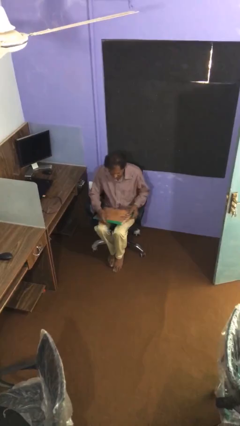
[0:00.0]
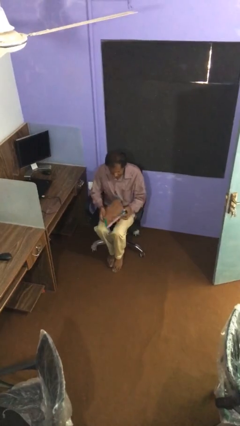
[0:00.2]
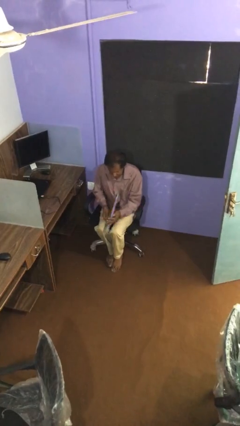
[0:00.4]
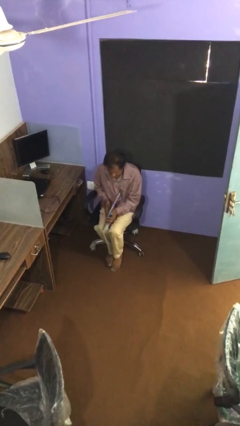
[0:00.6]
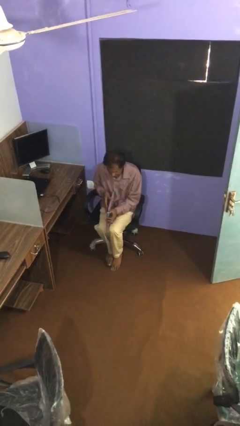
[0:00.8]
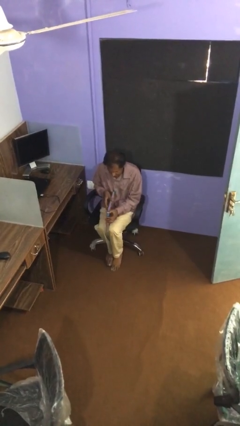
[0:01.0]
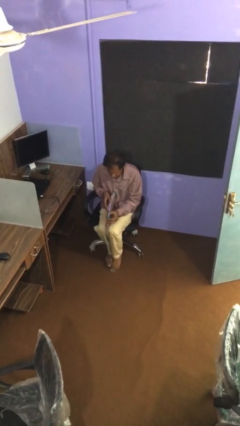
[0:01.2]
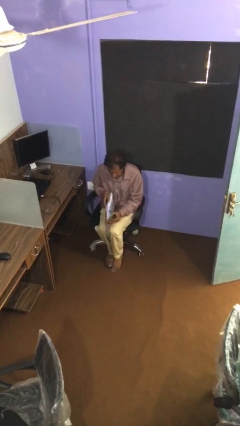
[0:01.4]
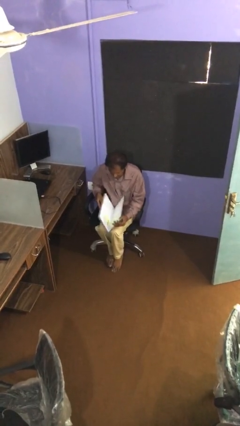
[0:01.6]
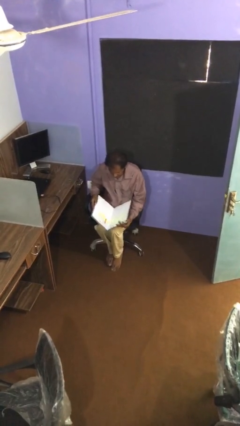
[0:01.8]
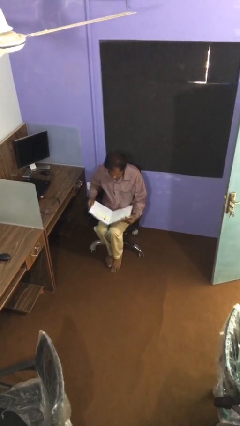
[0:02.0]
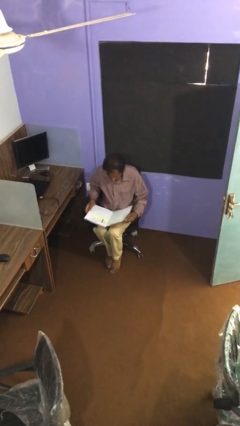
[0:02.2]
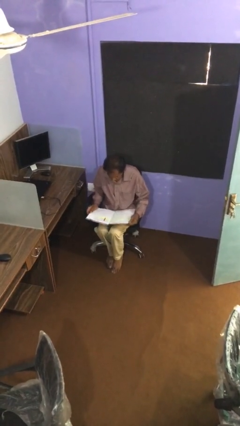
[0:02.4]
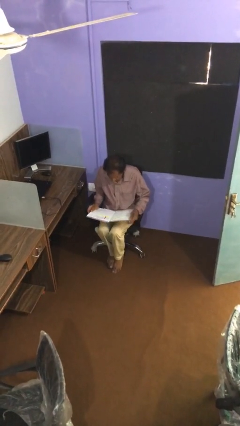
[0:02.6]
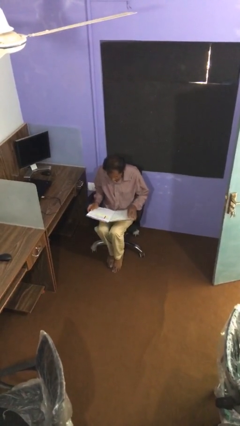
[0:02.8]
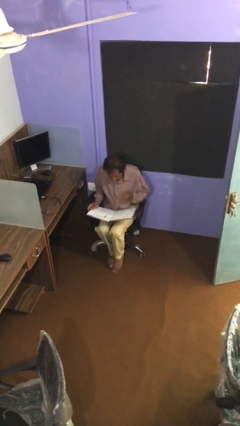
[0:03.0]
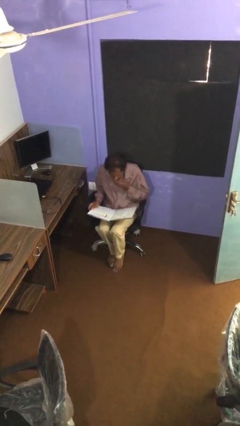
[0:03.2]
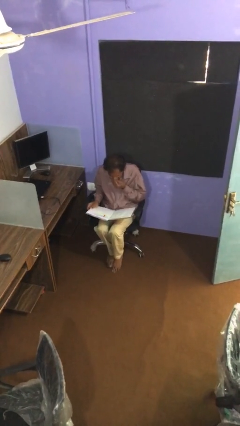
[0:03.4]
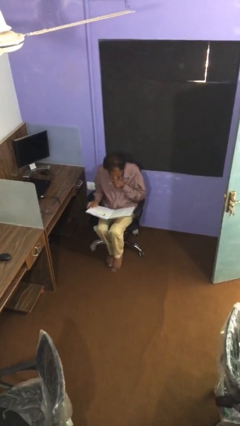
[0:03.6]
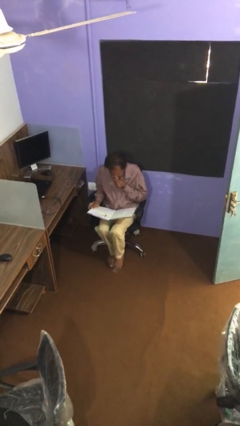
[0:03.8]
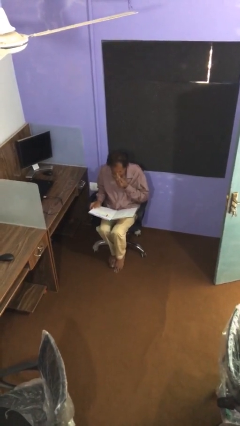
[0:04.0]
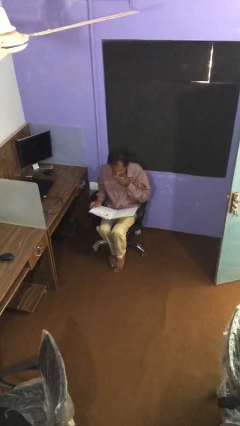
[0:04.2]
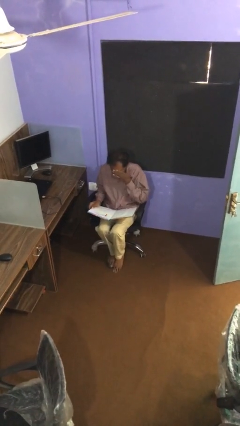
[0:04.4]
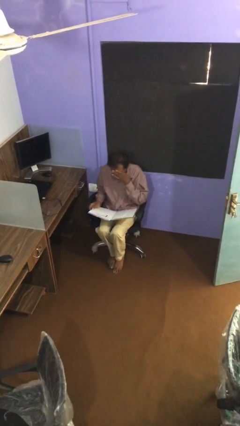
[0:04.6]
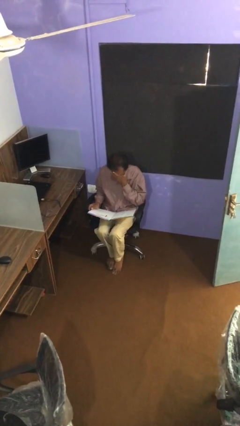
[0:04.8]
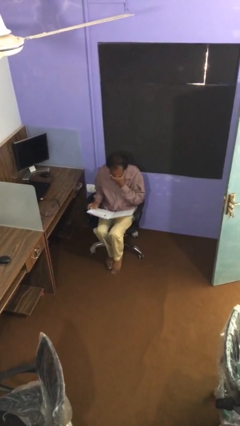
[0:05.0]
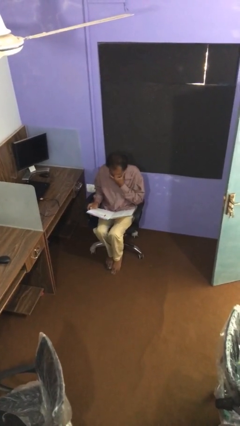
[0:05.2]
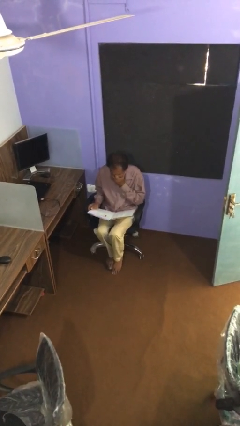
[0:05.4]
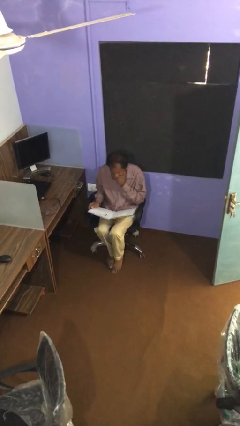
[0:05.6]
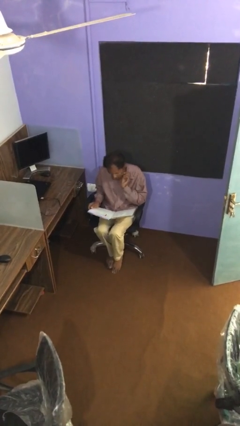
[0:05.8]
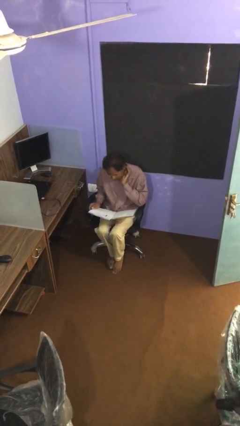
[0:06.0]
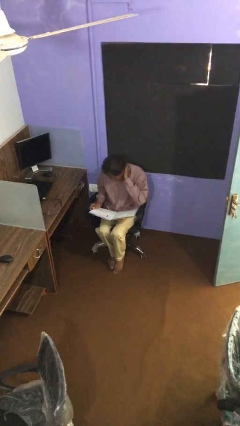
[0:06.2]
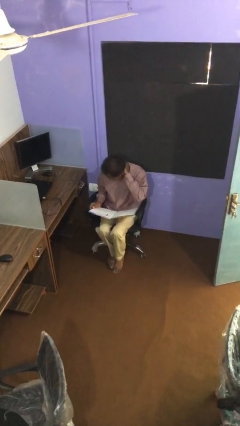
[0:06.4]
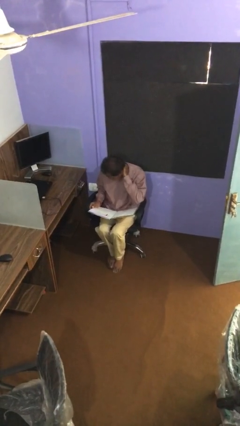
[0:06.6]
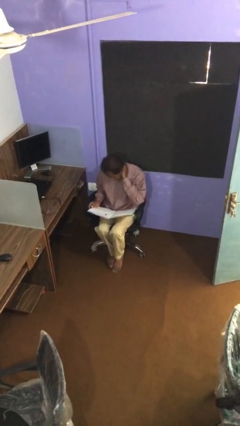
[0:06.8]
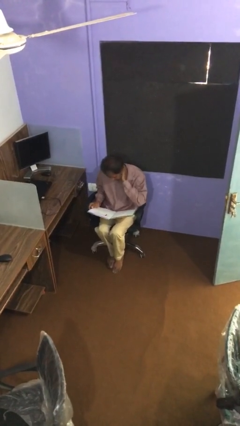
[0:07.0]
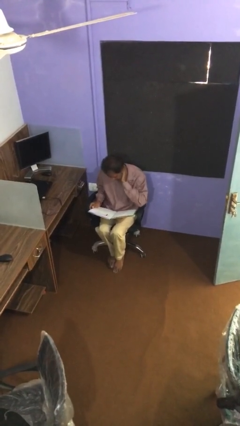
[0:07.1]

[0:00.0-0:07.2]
person reads document

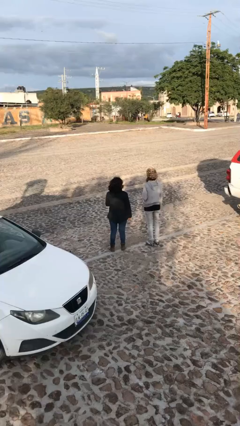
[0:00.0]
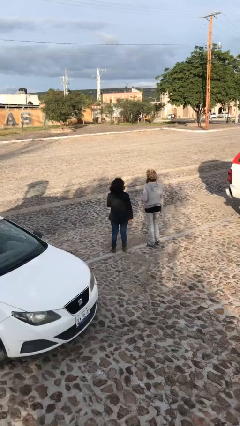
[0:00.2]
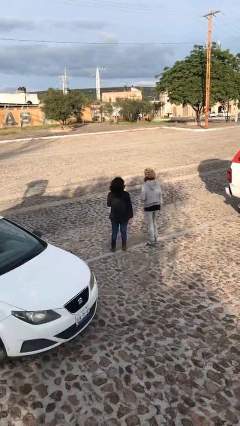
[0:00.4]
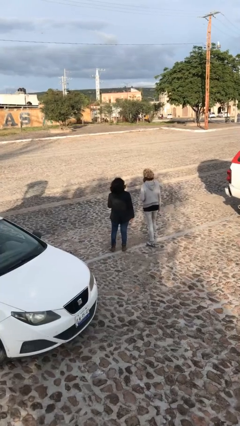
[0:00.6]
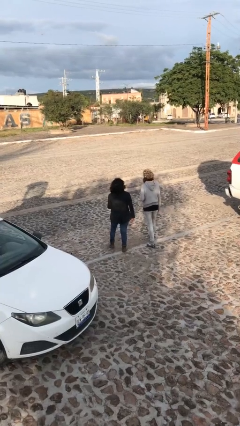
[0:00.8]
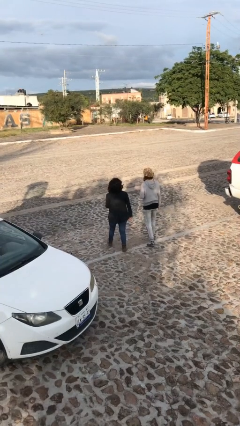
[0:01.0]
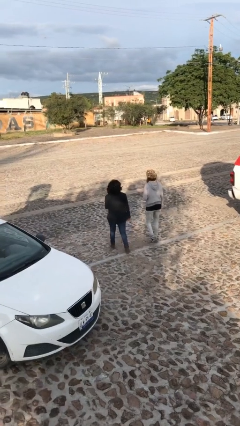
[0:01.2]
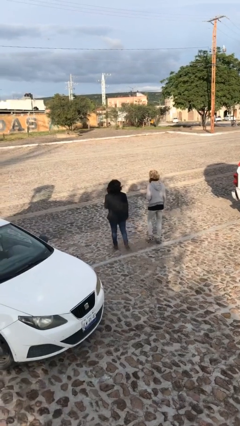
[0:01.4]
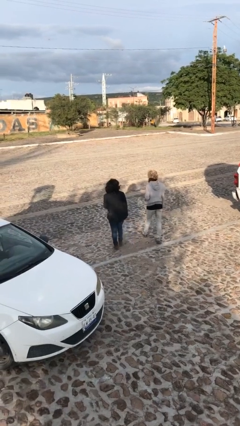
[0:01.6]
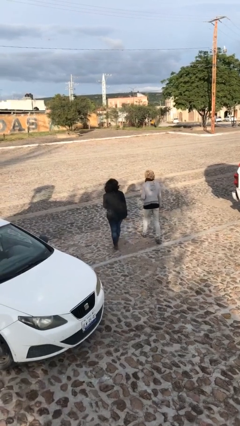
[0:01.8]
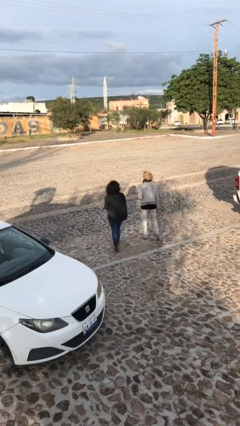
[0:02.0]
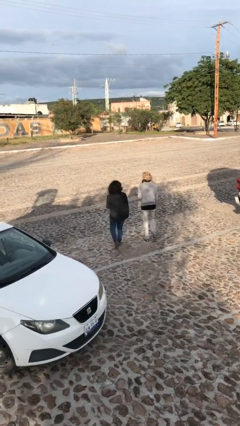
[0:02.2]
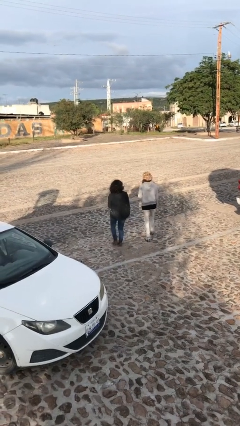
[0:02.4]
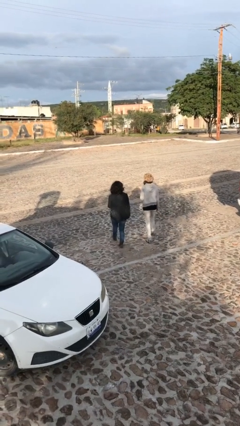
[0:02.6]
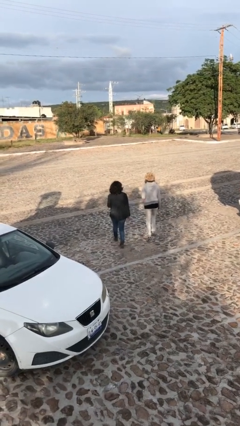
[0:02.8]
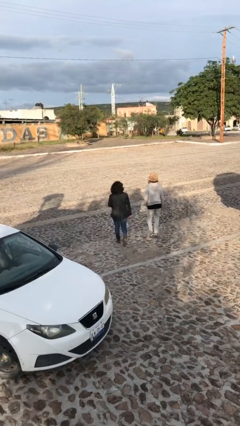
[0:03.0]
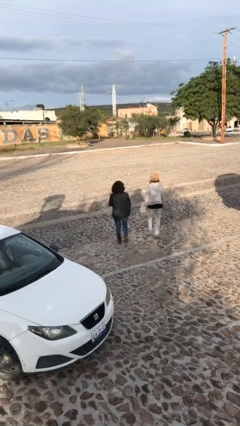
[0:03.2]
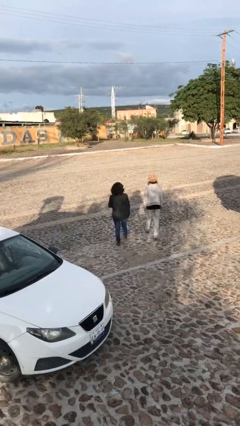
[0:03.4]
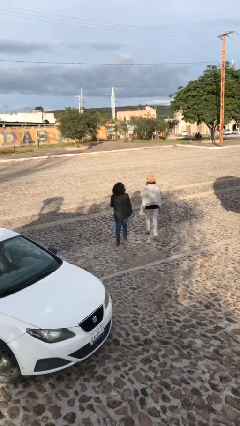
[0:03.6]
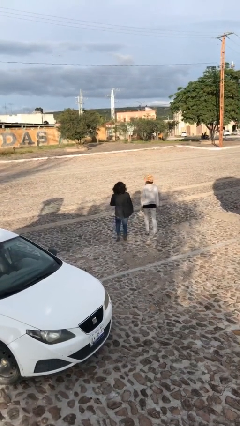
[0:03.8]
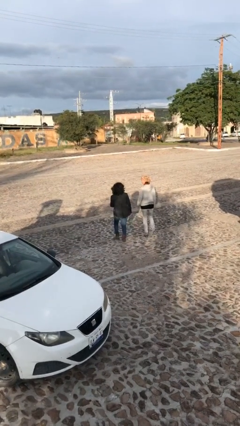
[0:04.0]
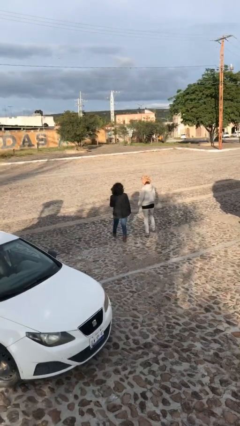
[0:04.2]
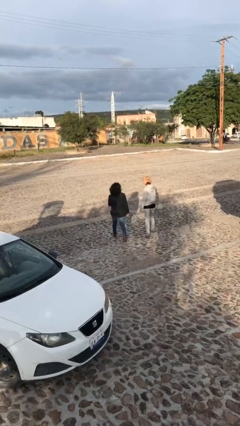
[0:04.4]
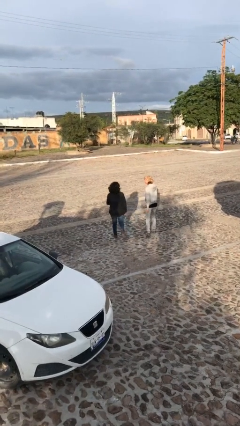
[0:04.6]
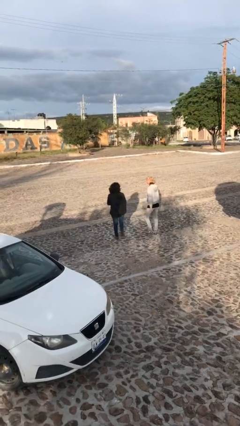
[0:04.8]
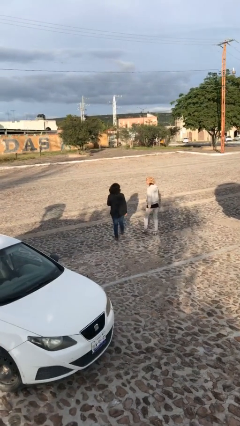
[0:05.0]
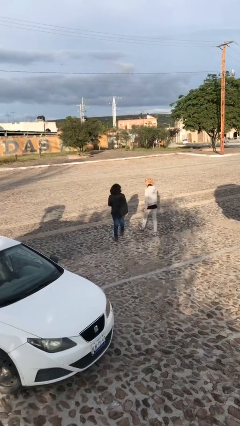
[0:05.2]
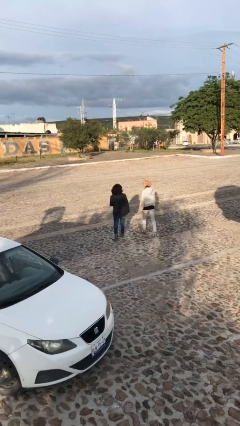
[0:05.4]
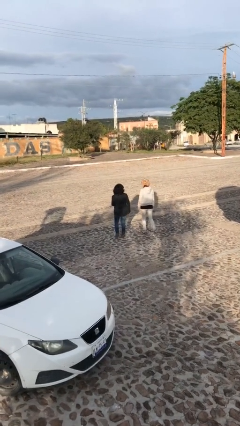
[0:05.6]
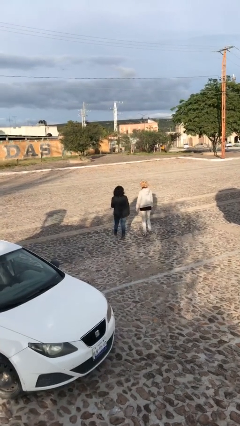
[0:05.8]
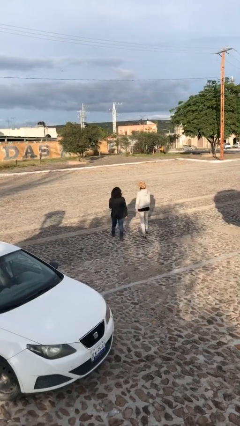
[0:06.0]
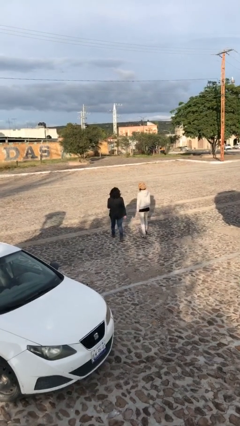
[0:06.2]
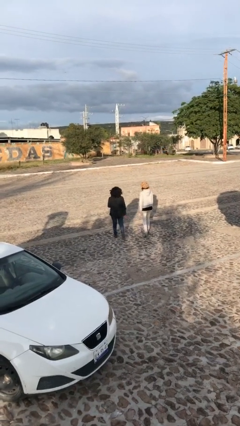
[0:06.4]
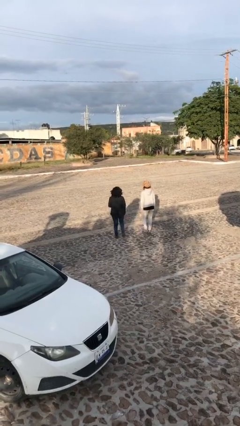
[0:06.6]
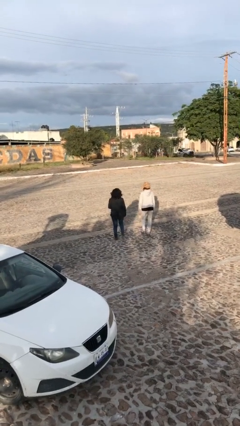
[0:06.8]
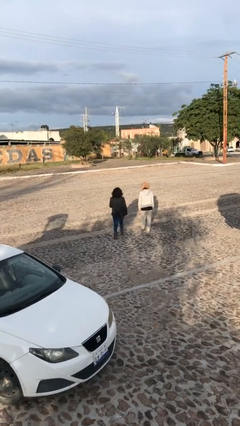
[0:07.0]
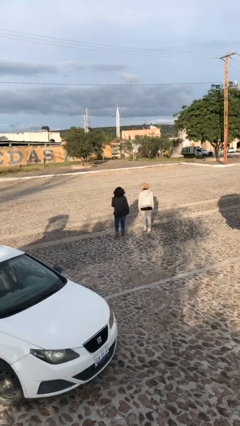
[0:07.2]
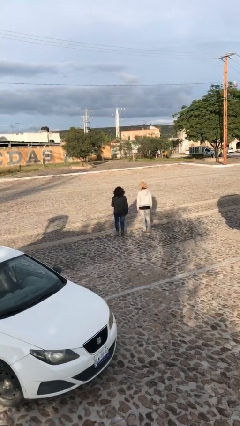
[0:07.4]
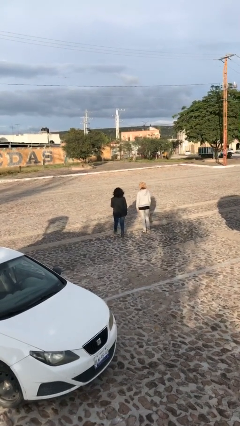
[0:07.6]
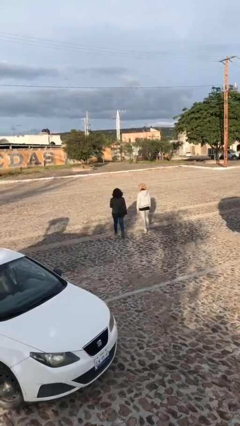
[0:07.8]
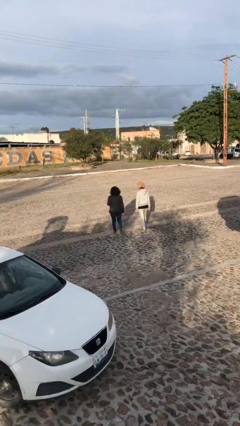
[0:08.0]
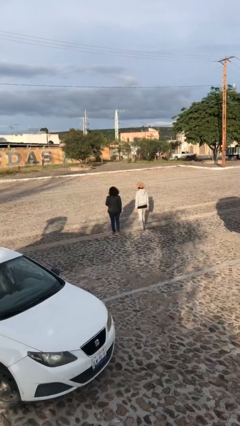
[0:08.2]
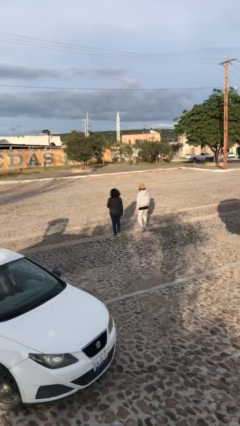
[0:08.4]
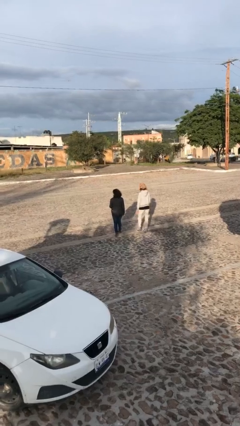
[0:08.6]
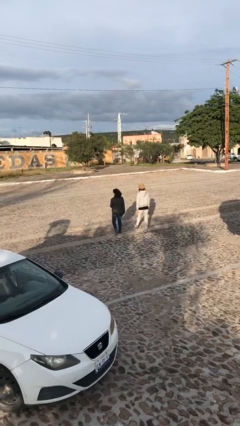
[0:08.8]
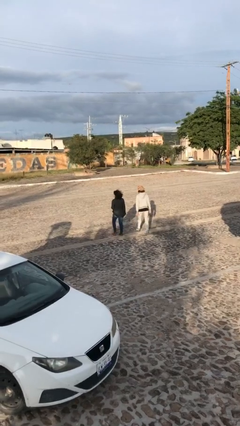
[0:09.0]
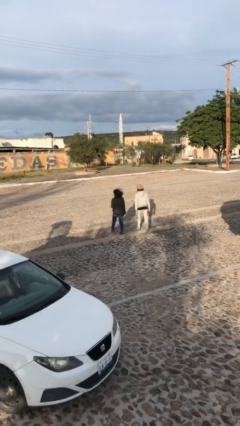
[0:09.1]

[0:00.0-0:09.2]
person talks to person

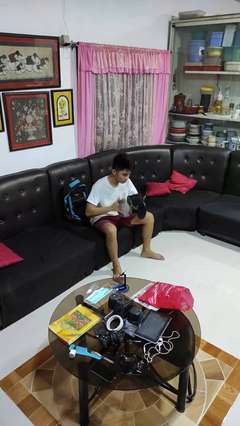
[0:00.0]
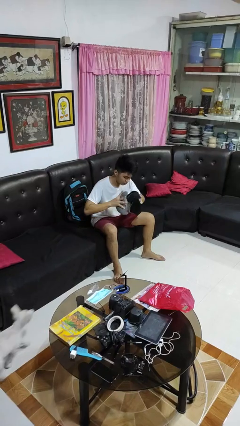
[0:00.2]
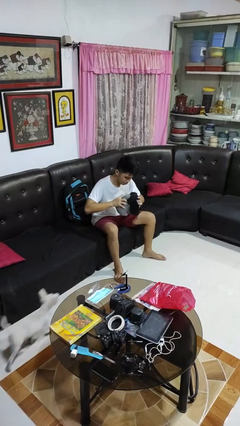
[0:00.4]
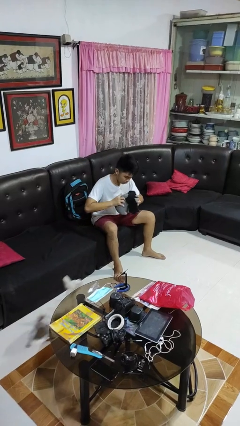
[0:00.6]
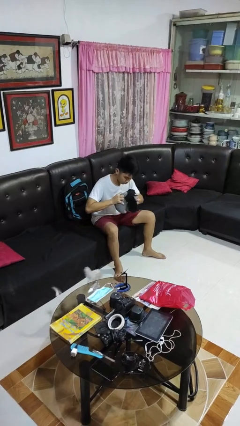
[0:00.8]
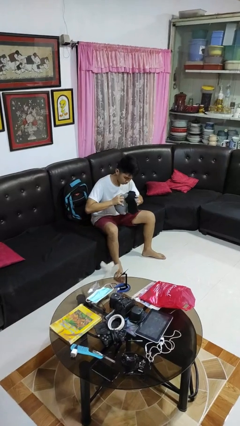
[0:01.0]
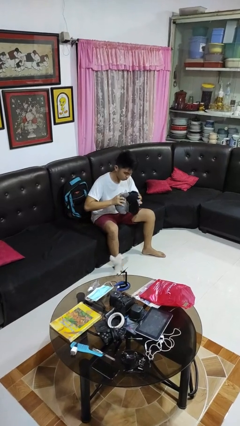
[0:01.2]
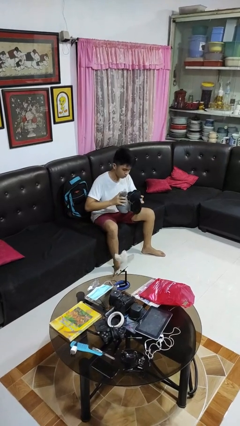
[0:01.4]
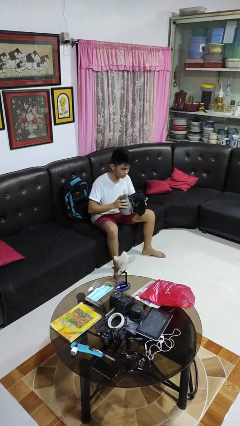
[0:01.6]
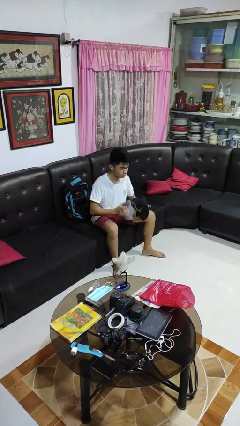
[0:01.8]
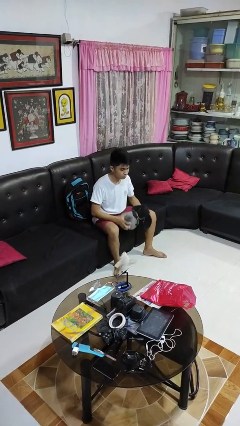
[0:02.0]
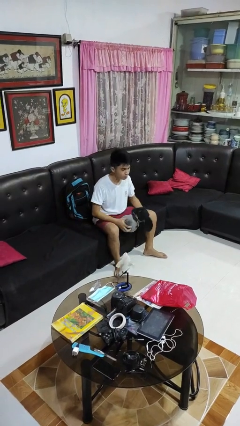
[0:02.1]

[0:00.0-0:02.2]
person squeezes object
